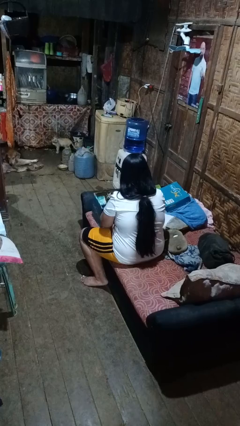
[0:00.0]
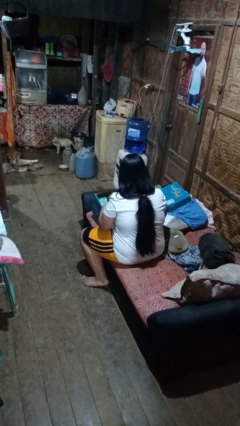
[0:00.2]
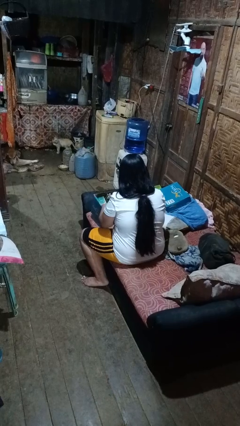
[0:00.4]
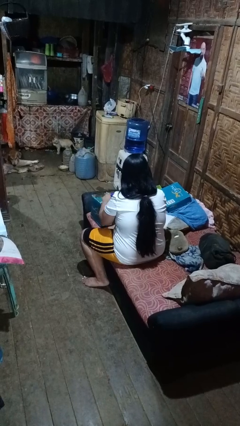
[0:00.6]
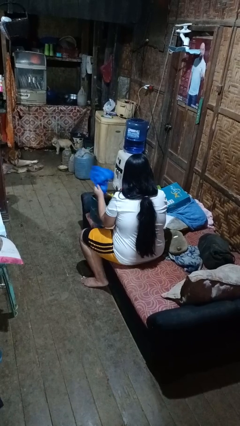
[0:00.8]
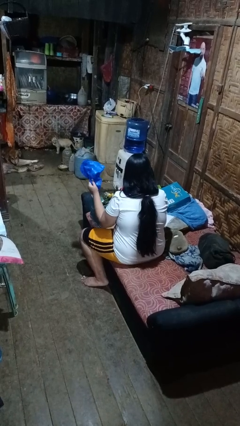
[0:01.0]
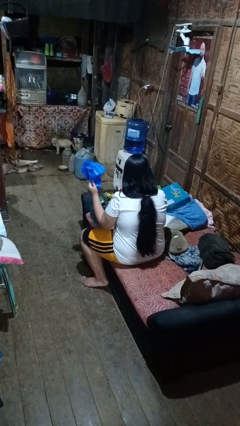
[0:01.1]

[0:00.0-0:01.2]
person searches in box

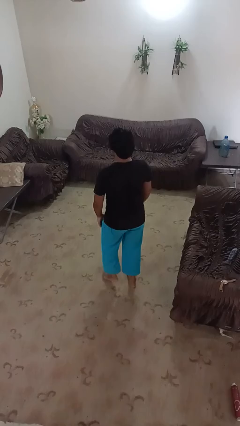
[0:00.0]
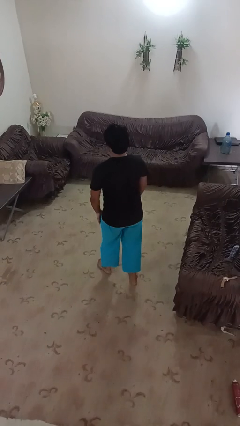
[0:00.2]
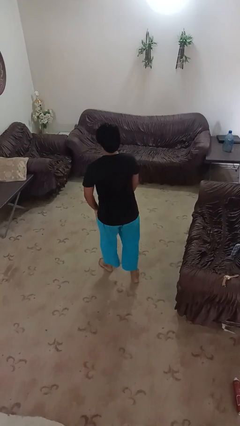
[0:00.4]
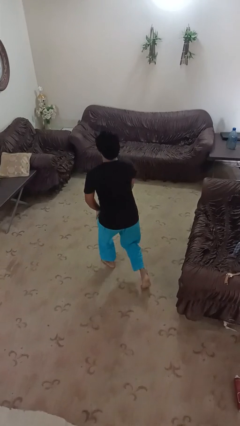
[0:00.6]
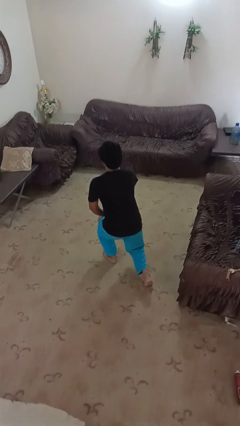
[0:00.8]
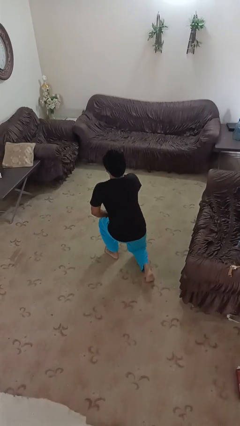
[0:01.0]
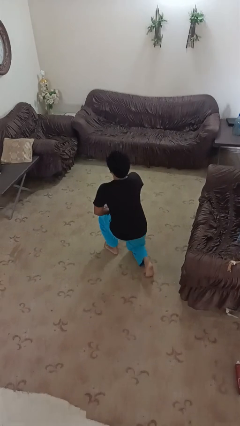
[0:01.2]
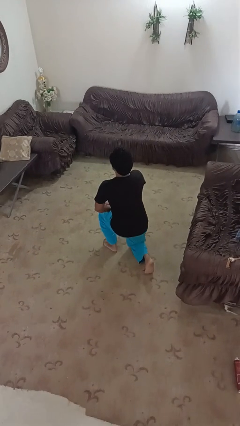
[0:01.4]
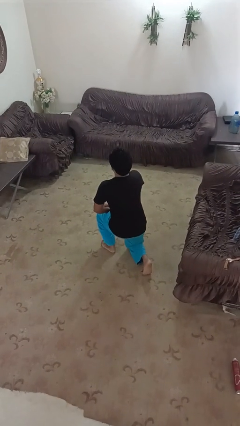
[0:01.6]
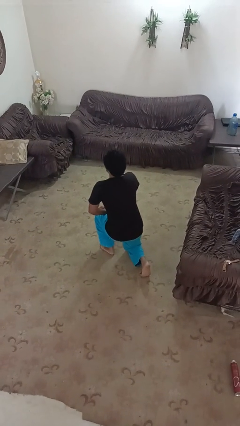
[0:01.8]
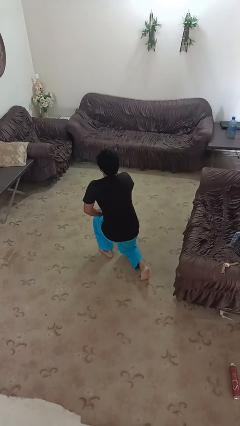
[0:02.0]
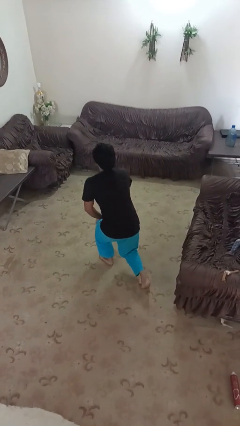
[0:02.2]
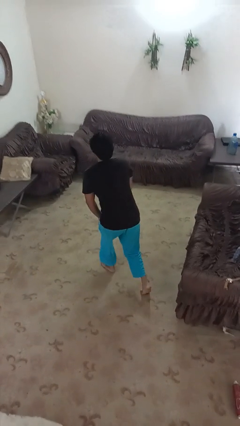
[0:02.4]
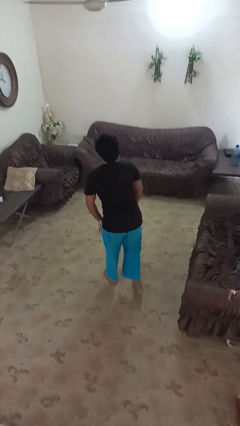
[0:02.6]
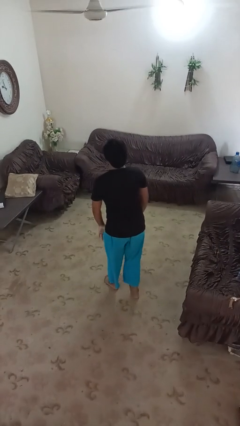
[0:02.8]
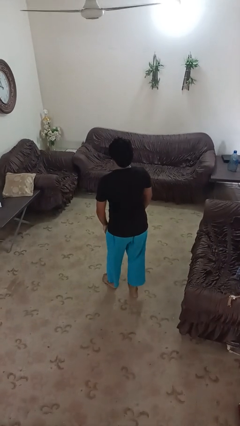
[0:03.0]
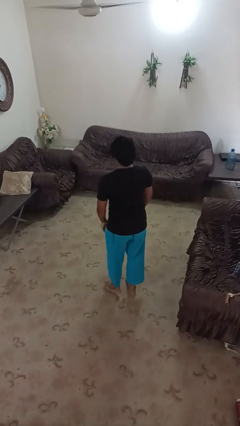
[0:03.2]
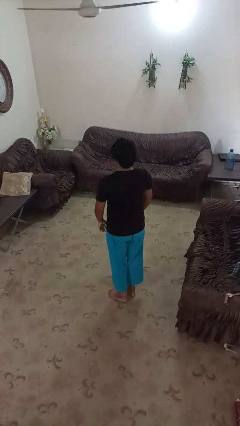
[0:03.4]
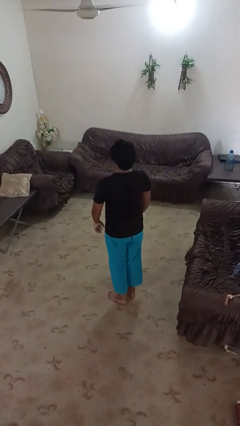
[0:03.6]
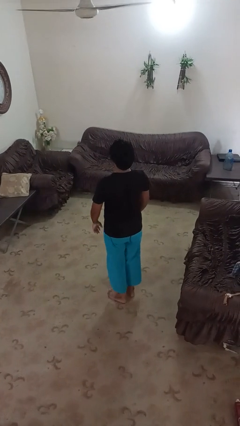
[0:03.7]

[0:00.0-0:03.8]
person exercises with lunges

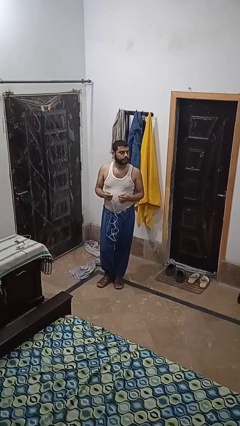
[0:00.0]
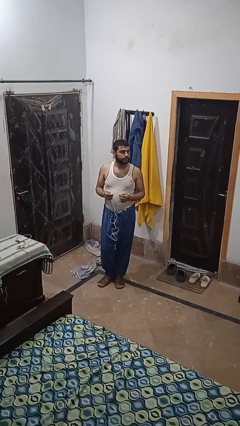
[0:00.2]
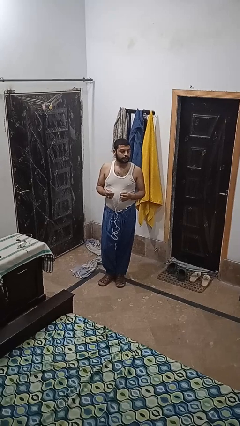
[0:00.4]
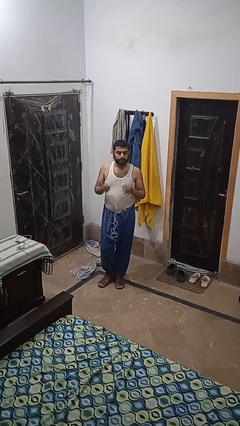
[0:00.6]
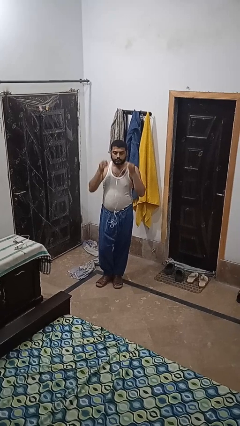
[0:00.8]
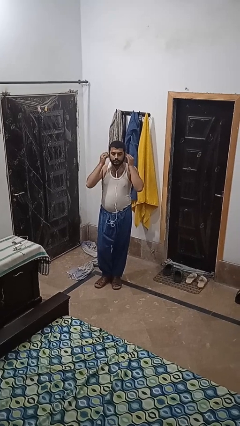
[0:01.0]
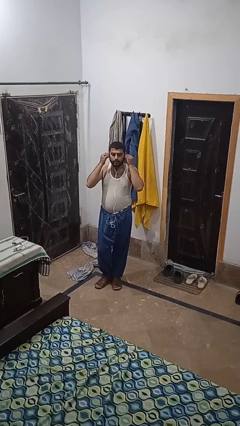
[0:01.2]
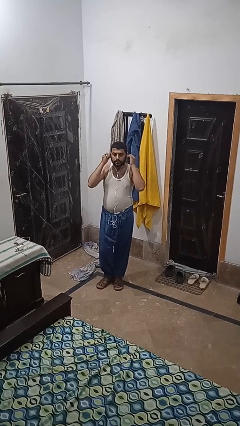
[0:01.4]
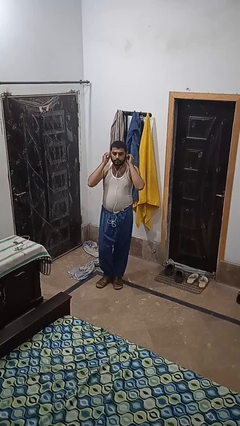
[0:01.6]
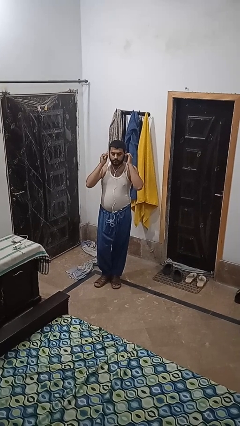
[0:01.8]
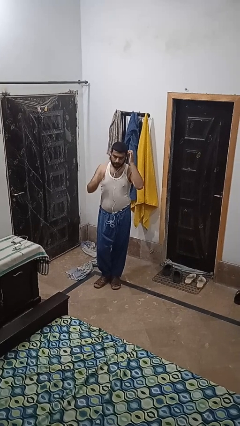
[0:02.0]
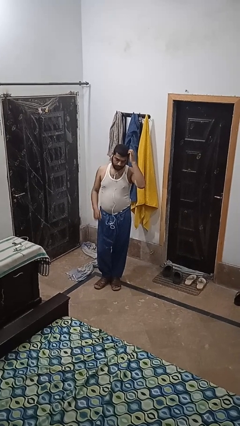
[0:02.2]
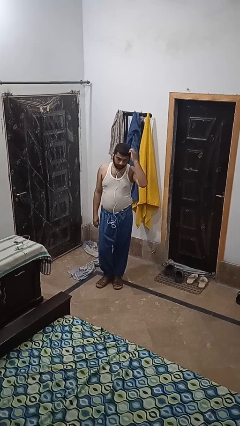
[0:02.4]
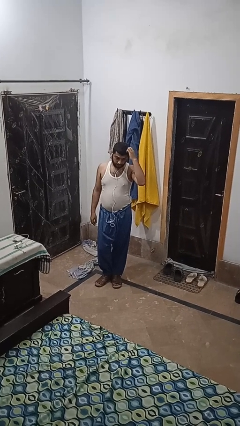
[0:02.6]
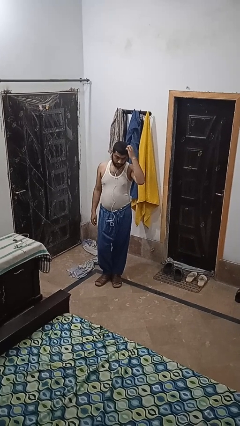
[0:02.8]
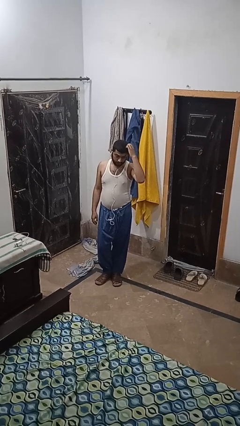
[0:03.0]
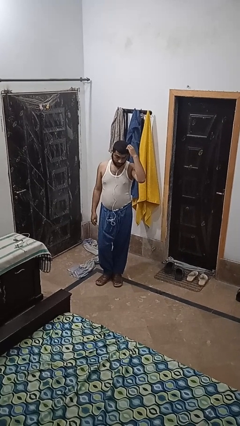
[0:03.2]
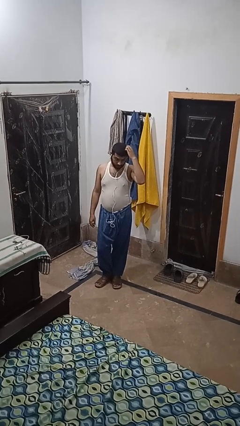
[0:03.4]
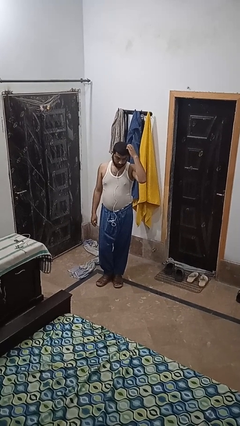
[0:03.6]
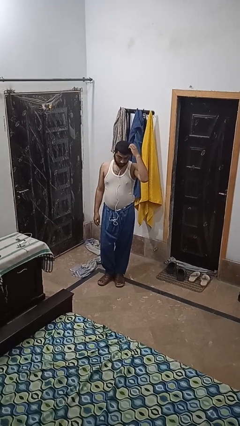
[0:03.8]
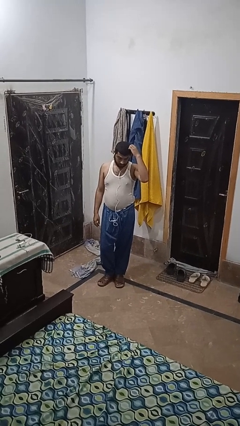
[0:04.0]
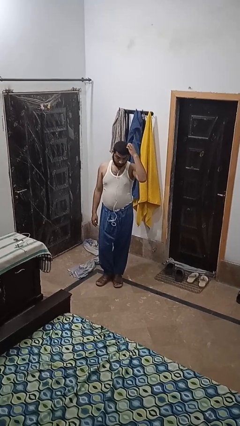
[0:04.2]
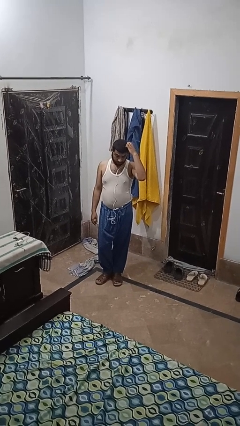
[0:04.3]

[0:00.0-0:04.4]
person puts on headphones

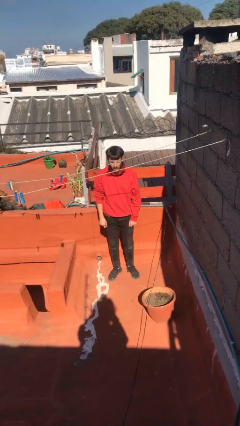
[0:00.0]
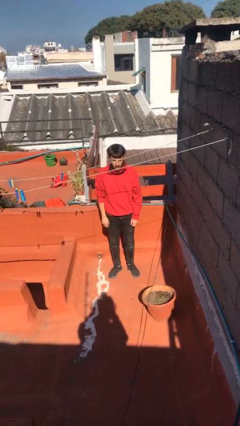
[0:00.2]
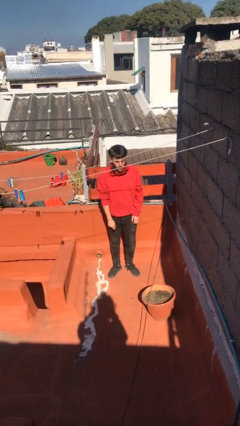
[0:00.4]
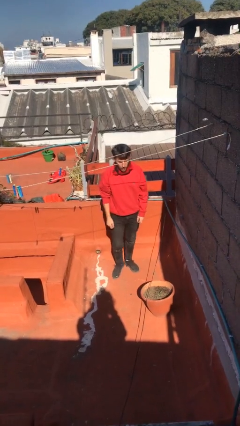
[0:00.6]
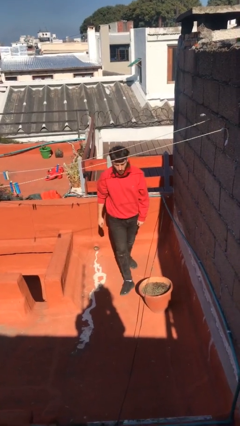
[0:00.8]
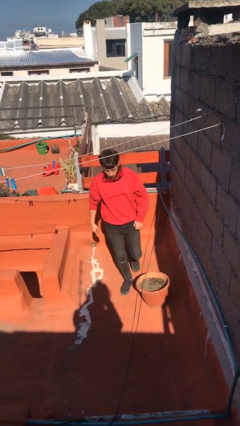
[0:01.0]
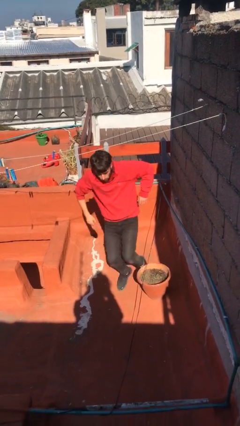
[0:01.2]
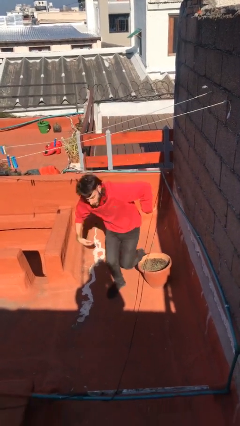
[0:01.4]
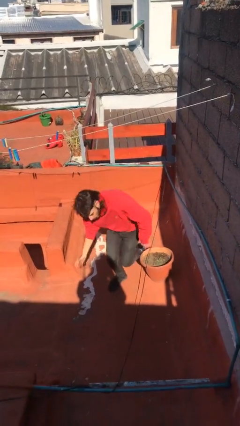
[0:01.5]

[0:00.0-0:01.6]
person trips on object on floor

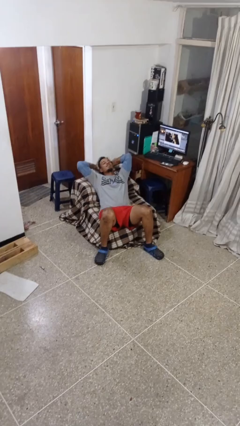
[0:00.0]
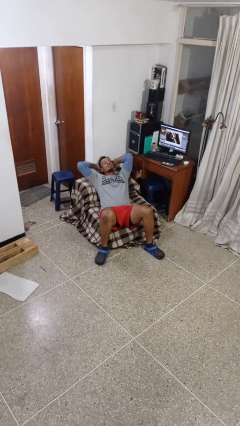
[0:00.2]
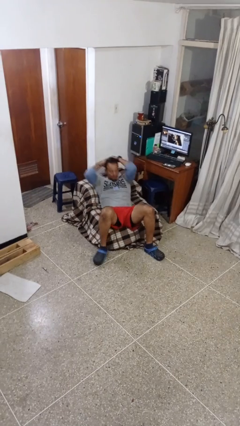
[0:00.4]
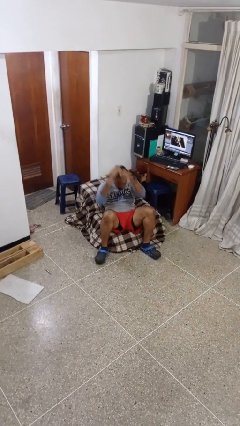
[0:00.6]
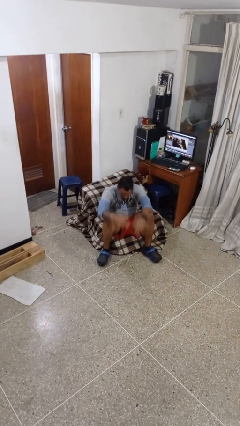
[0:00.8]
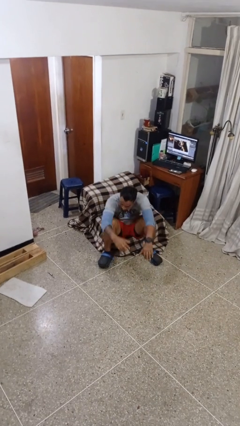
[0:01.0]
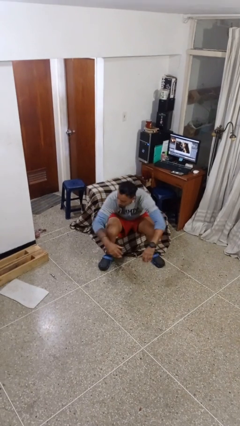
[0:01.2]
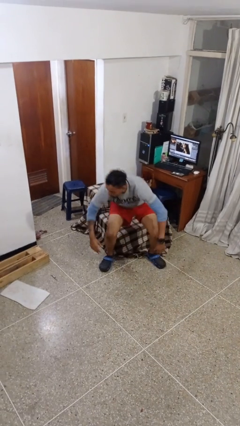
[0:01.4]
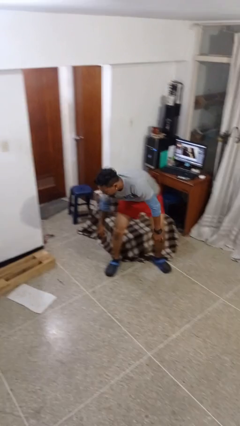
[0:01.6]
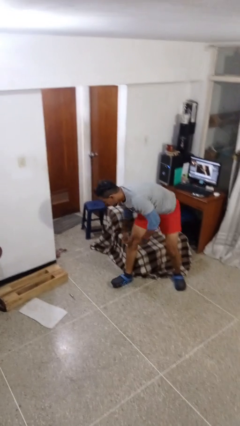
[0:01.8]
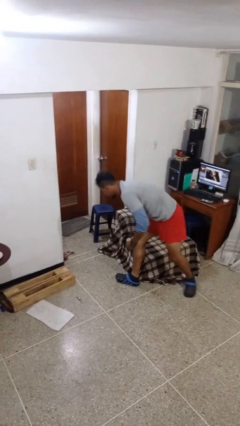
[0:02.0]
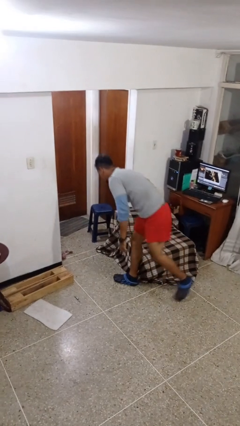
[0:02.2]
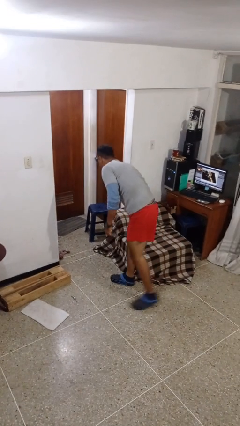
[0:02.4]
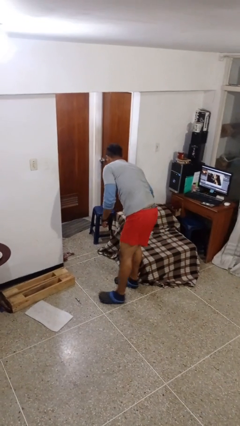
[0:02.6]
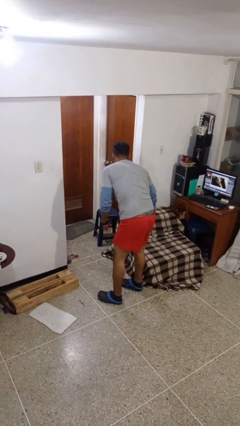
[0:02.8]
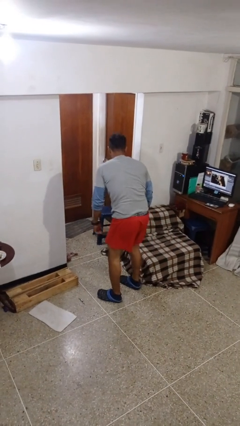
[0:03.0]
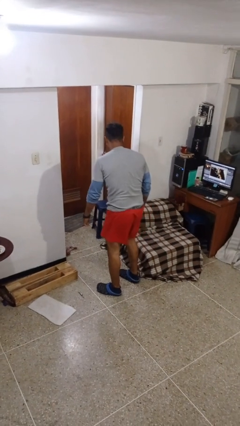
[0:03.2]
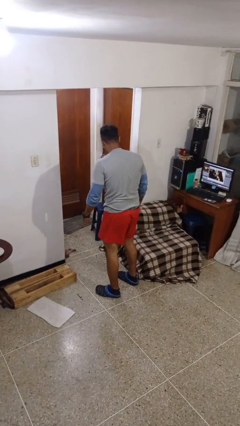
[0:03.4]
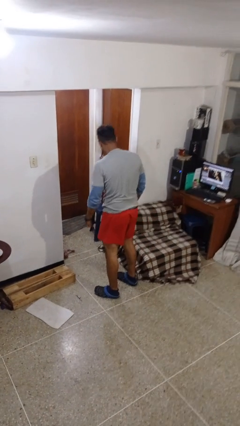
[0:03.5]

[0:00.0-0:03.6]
person stands up

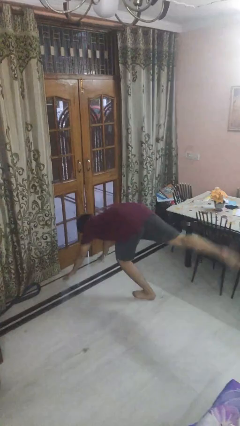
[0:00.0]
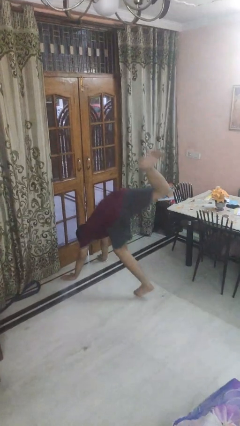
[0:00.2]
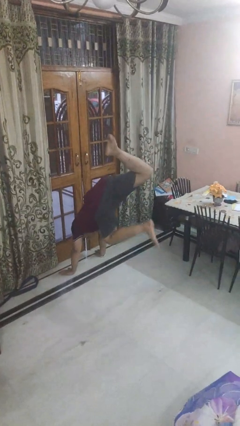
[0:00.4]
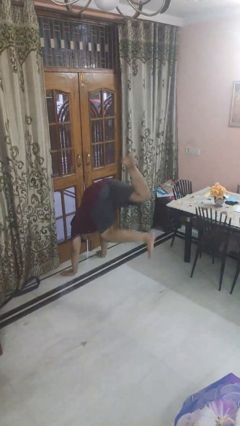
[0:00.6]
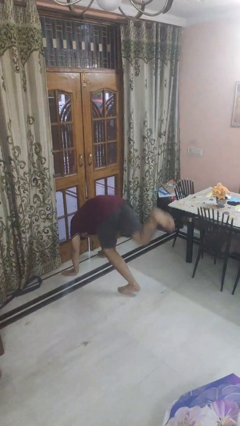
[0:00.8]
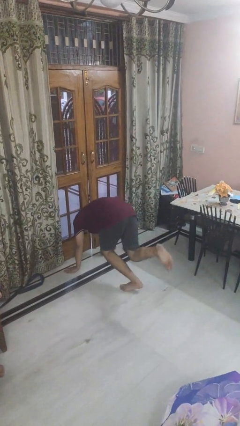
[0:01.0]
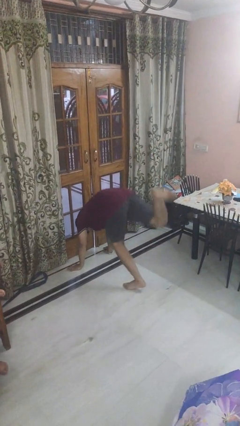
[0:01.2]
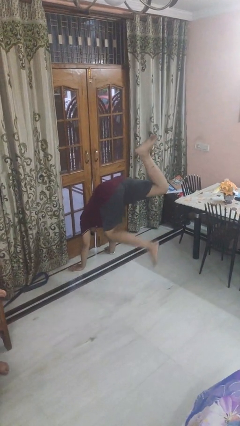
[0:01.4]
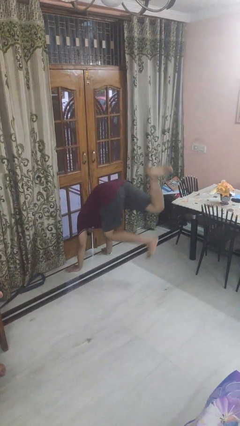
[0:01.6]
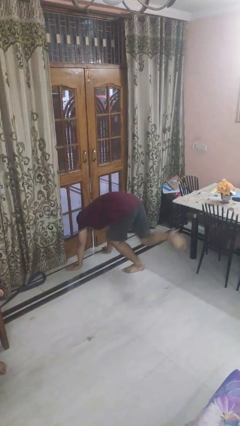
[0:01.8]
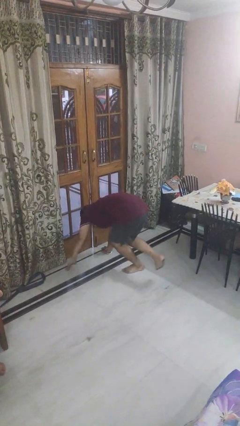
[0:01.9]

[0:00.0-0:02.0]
person handstand

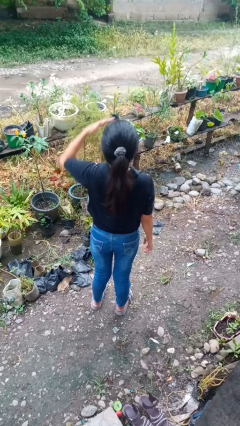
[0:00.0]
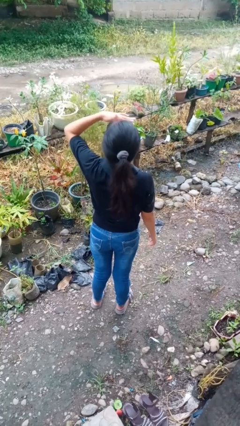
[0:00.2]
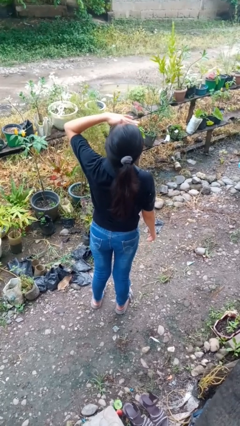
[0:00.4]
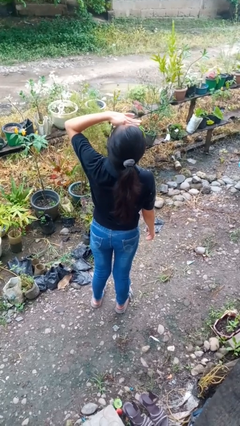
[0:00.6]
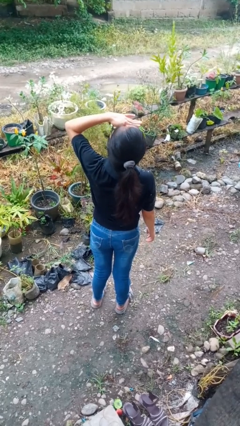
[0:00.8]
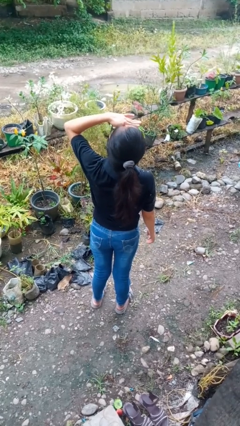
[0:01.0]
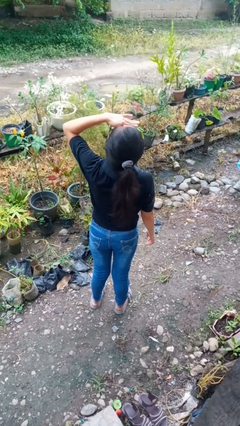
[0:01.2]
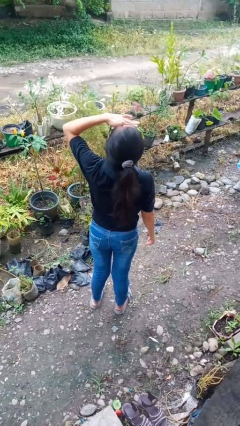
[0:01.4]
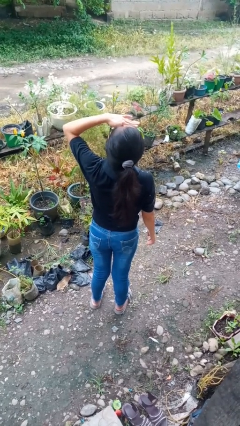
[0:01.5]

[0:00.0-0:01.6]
person shades eyes
